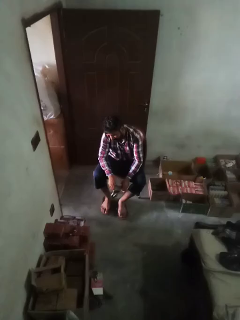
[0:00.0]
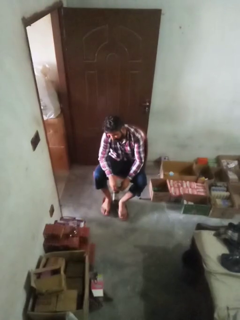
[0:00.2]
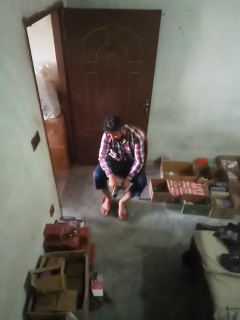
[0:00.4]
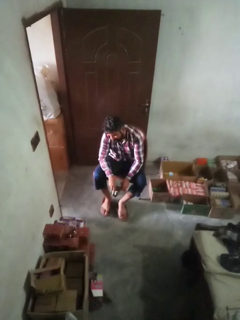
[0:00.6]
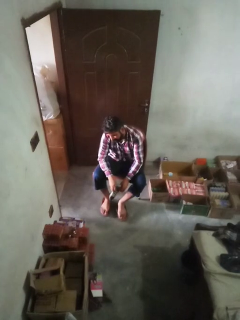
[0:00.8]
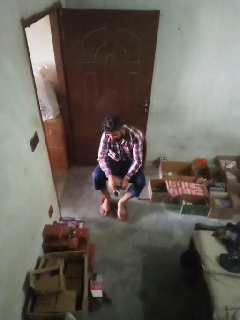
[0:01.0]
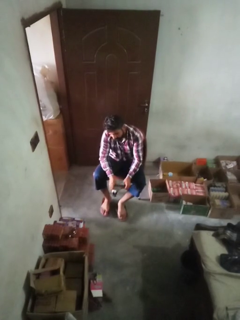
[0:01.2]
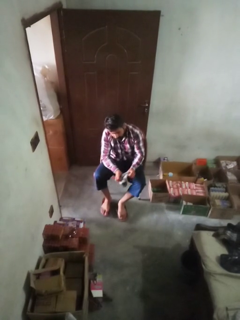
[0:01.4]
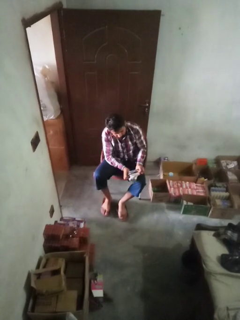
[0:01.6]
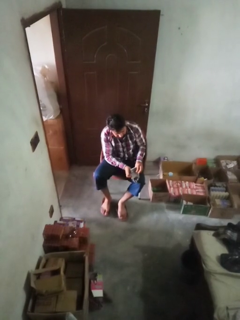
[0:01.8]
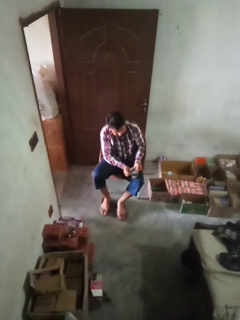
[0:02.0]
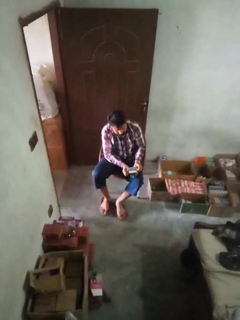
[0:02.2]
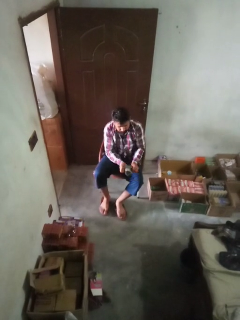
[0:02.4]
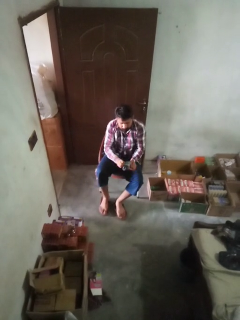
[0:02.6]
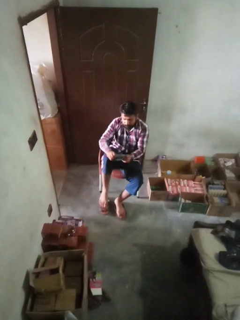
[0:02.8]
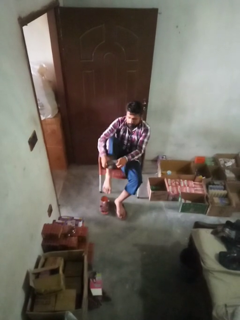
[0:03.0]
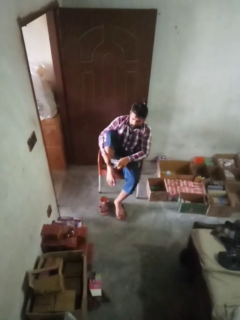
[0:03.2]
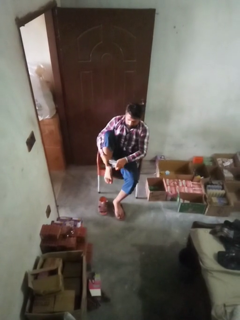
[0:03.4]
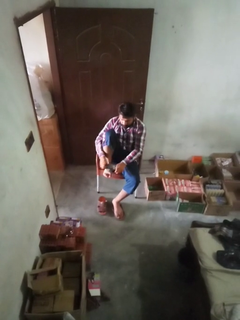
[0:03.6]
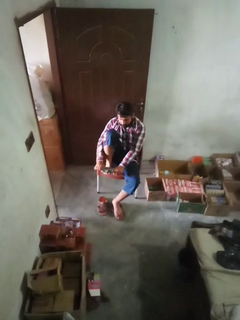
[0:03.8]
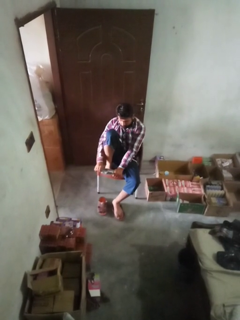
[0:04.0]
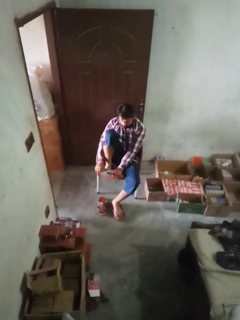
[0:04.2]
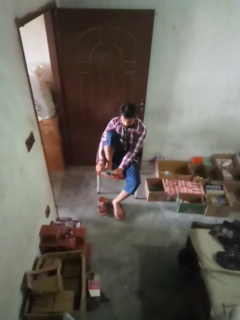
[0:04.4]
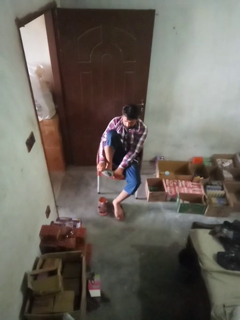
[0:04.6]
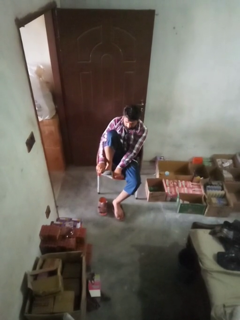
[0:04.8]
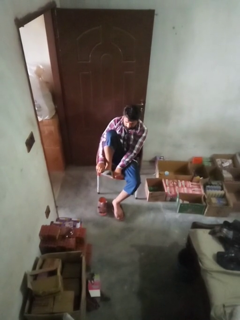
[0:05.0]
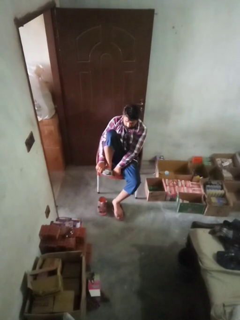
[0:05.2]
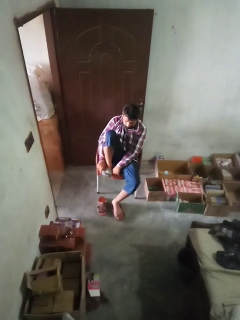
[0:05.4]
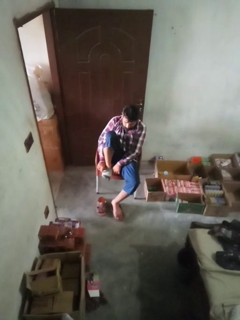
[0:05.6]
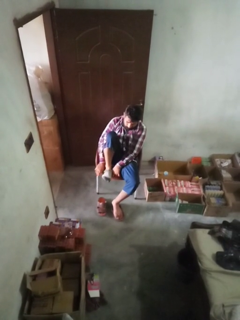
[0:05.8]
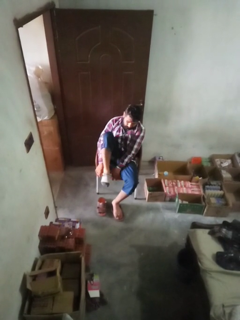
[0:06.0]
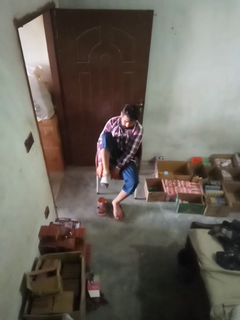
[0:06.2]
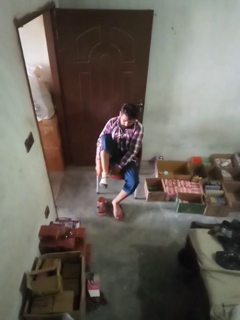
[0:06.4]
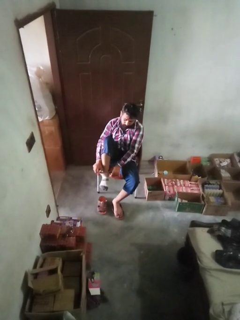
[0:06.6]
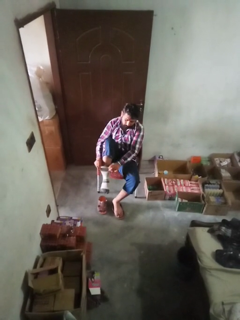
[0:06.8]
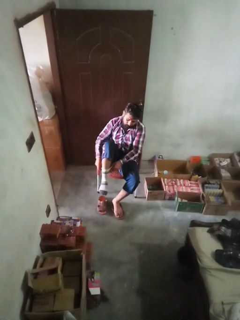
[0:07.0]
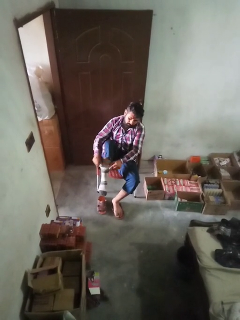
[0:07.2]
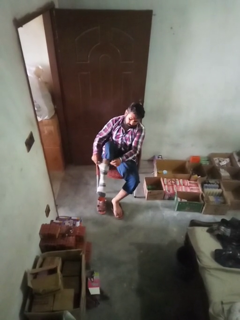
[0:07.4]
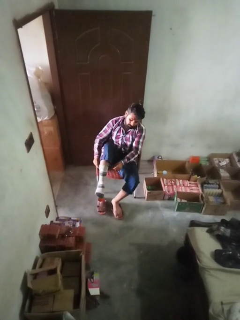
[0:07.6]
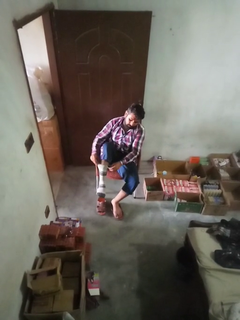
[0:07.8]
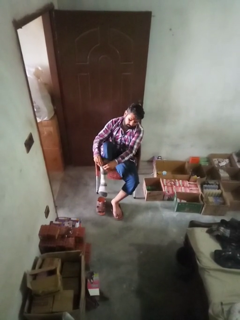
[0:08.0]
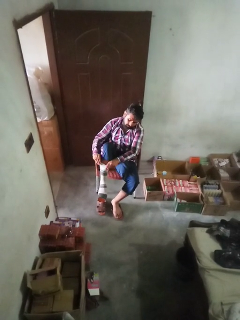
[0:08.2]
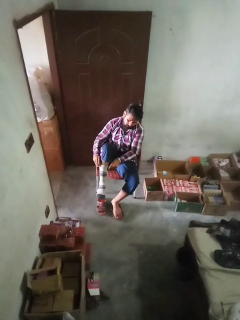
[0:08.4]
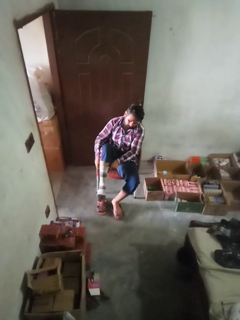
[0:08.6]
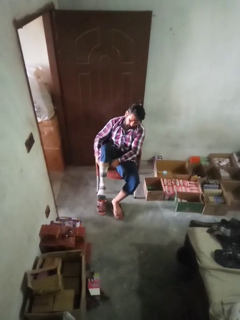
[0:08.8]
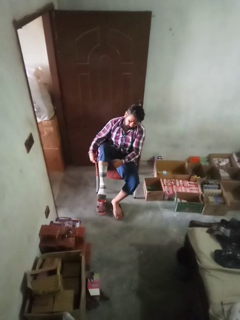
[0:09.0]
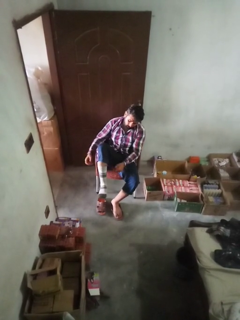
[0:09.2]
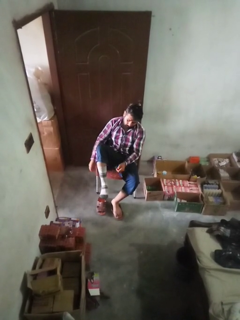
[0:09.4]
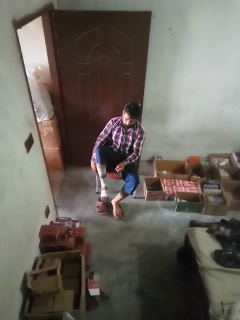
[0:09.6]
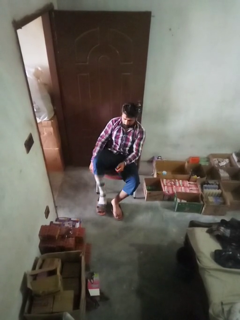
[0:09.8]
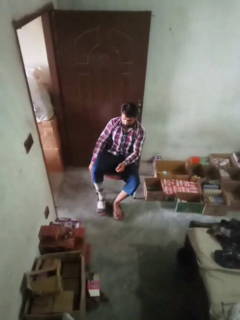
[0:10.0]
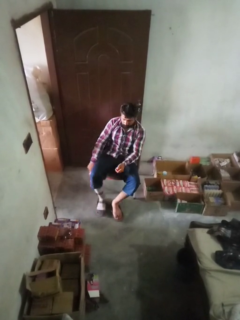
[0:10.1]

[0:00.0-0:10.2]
person puts on socks

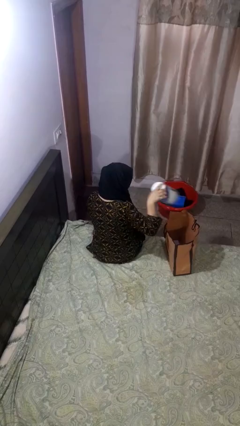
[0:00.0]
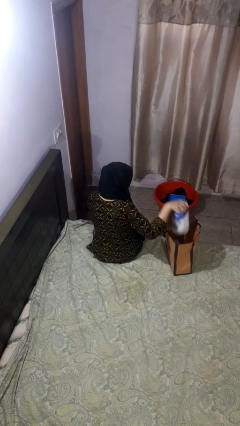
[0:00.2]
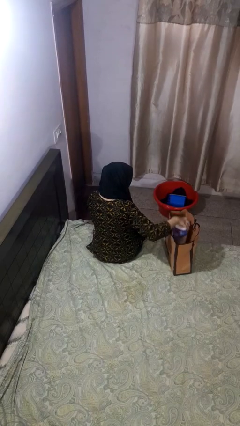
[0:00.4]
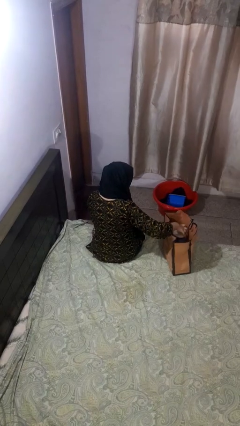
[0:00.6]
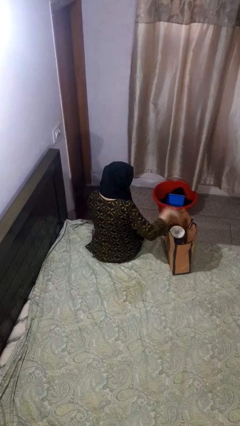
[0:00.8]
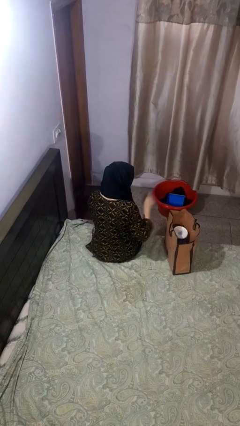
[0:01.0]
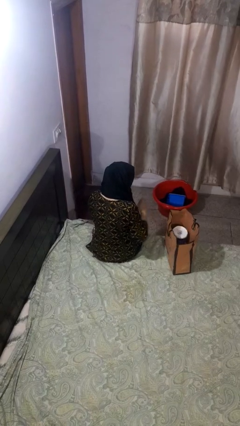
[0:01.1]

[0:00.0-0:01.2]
person puts object into bag

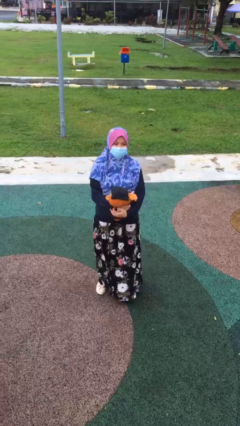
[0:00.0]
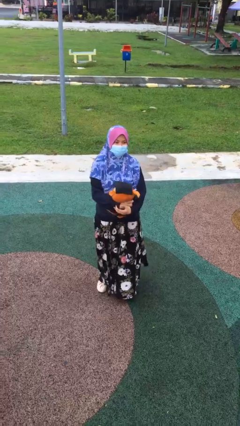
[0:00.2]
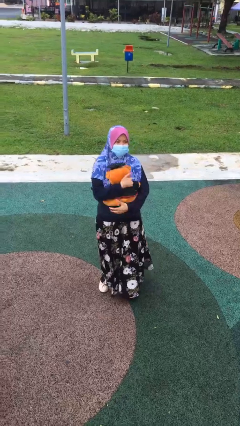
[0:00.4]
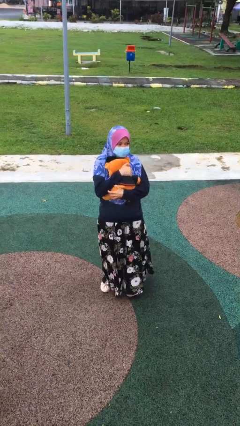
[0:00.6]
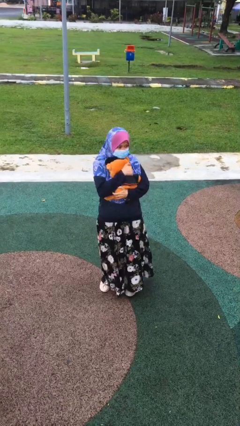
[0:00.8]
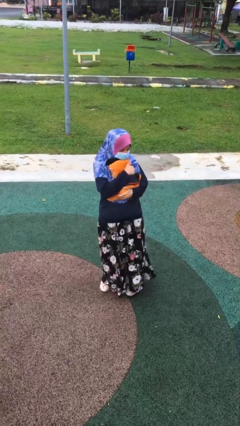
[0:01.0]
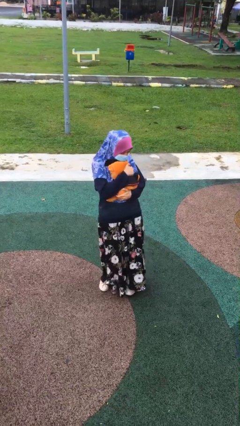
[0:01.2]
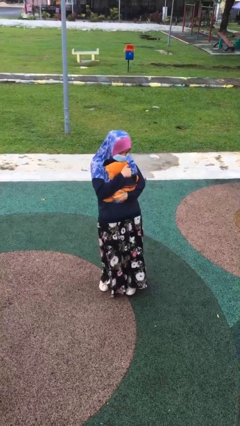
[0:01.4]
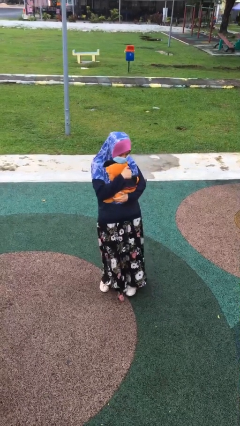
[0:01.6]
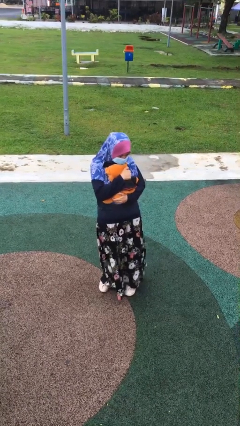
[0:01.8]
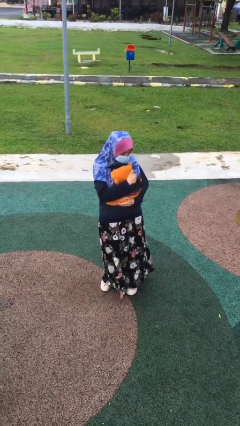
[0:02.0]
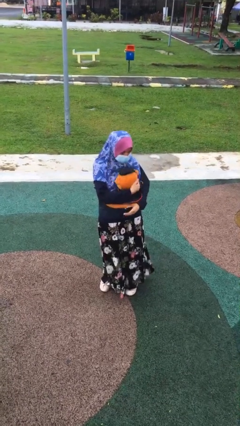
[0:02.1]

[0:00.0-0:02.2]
person hugs stuffed animal

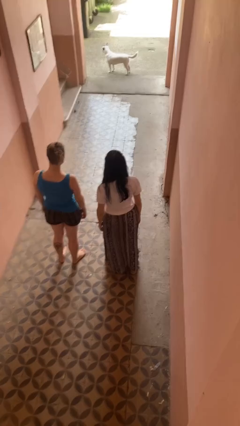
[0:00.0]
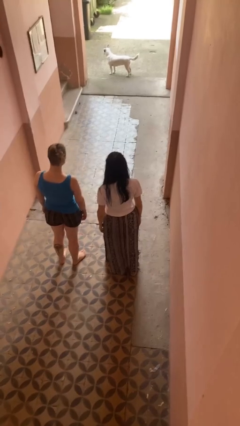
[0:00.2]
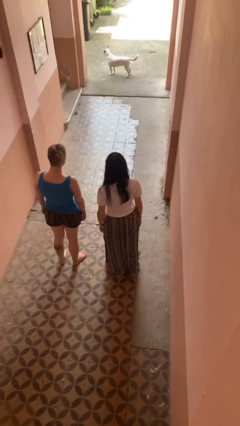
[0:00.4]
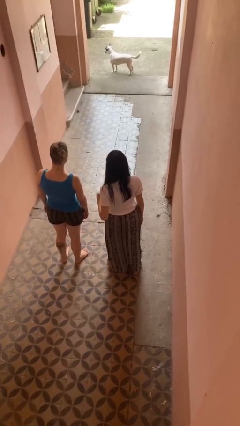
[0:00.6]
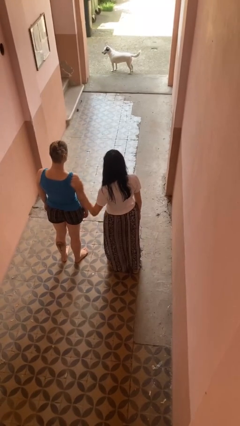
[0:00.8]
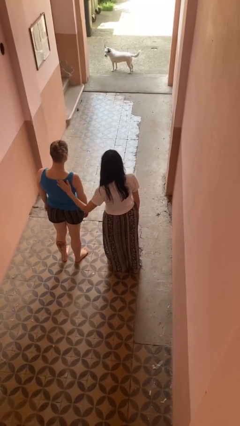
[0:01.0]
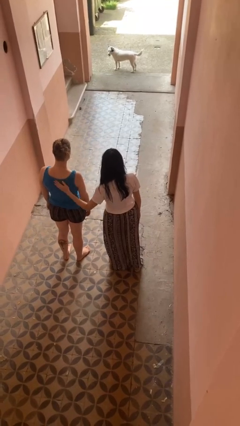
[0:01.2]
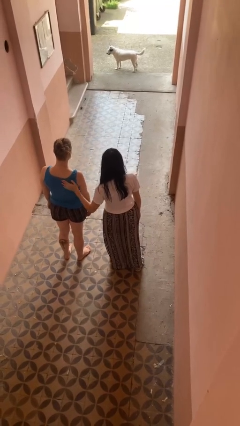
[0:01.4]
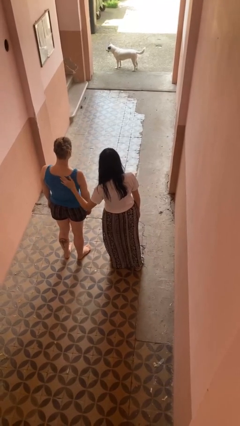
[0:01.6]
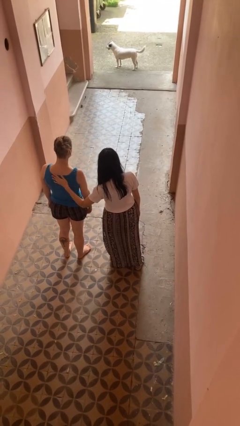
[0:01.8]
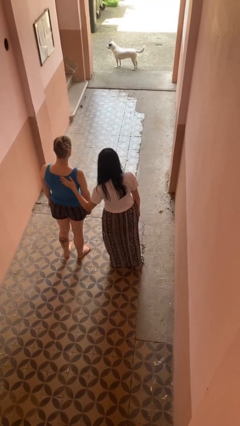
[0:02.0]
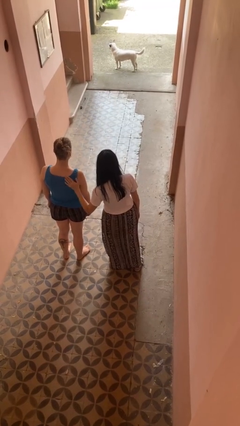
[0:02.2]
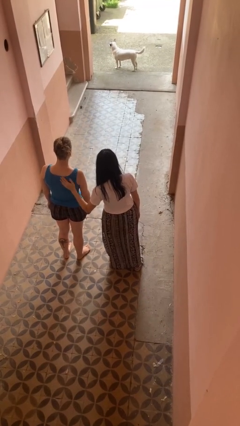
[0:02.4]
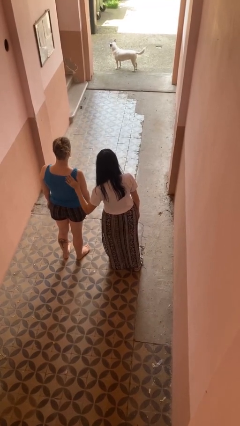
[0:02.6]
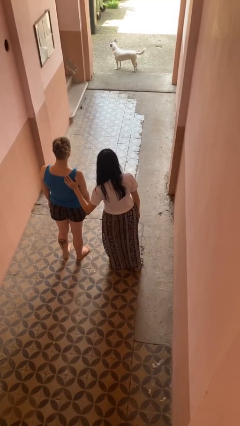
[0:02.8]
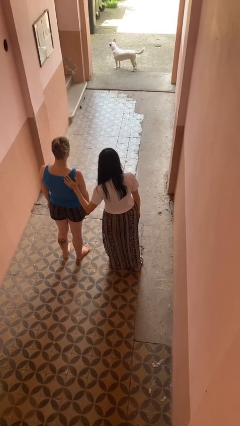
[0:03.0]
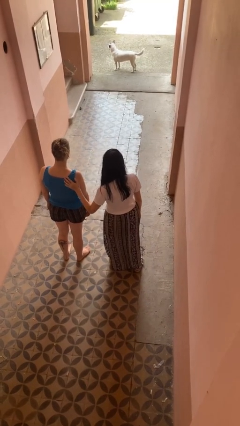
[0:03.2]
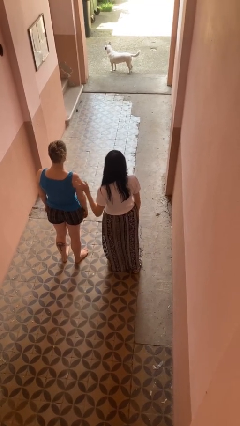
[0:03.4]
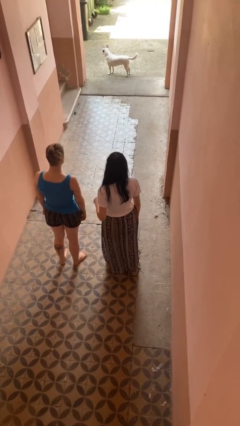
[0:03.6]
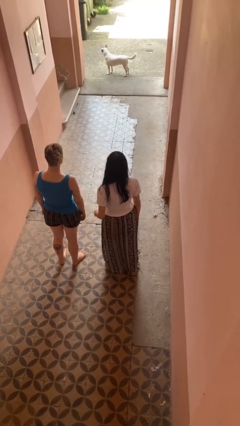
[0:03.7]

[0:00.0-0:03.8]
person touches back of person

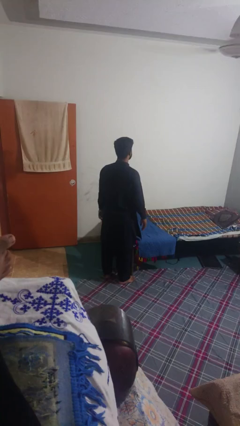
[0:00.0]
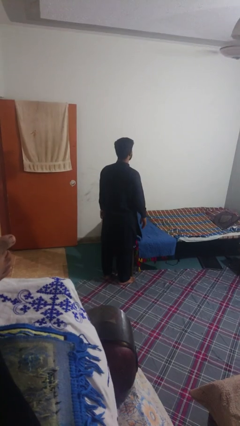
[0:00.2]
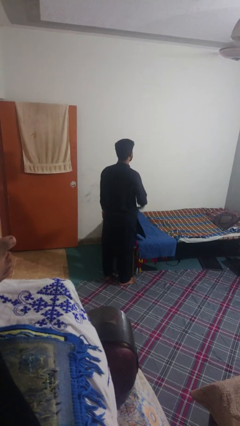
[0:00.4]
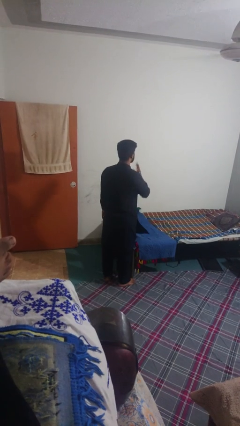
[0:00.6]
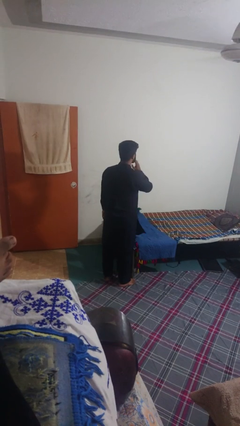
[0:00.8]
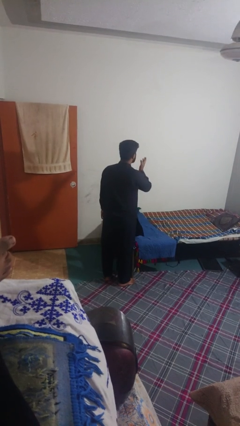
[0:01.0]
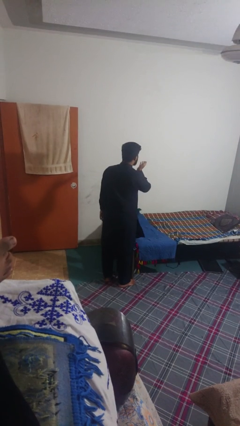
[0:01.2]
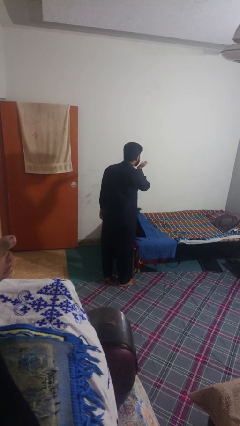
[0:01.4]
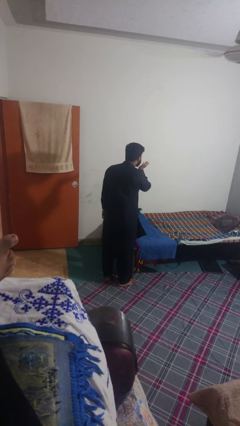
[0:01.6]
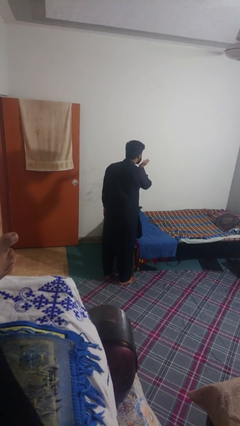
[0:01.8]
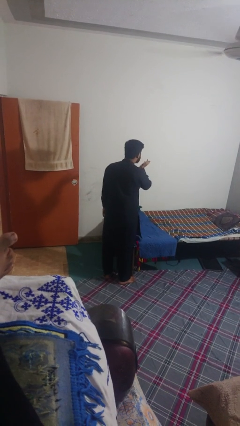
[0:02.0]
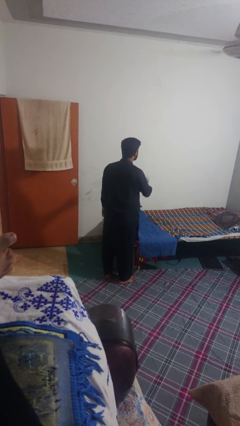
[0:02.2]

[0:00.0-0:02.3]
person gestures blow kiss

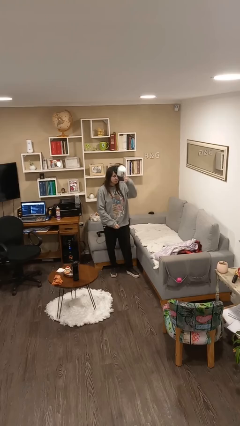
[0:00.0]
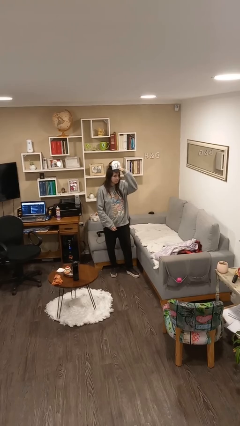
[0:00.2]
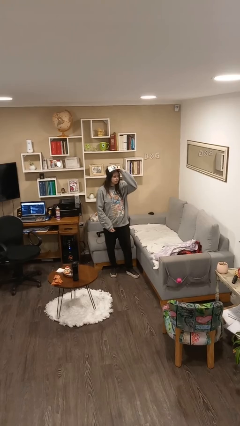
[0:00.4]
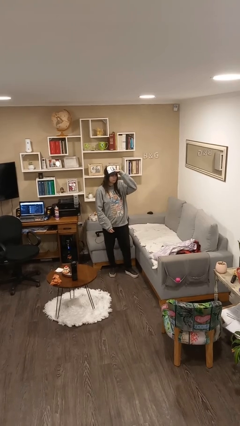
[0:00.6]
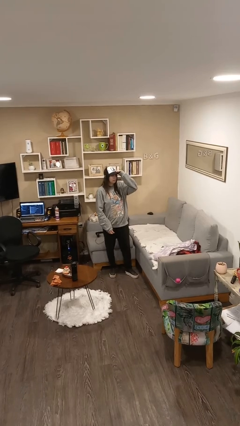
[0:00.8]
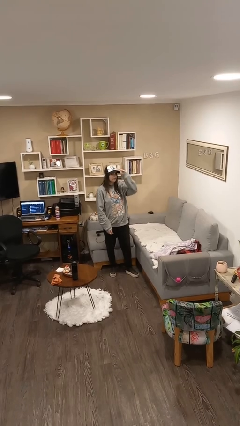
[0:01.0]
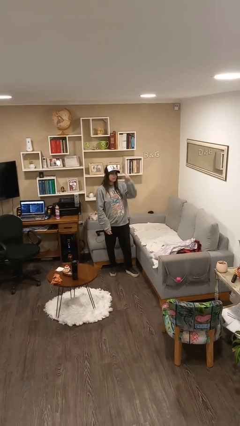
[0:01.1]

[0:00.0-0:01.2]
person puts on hat
